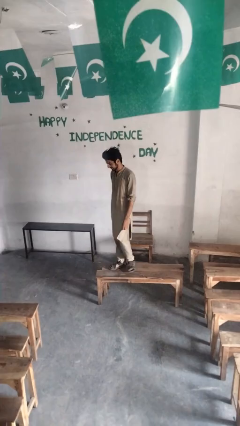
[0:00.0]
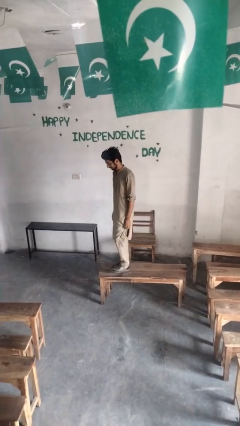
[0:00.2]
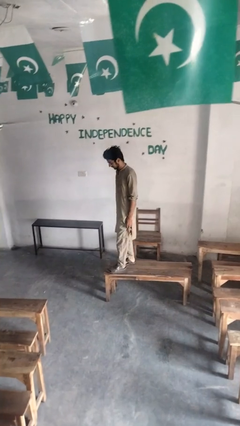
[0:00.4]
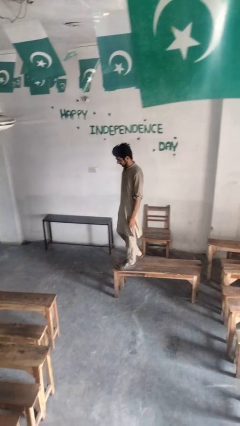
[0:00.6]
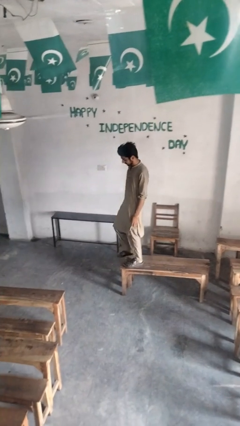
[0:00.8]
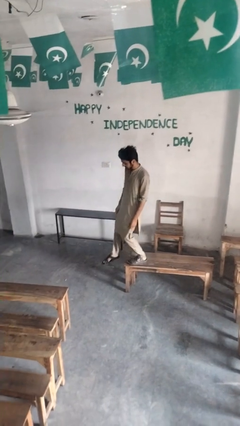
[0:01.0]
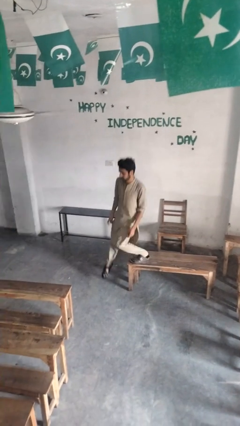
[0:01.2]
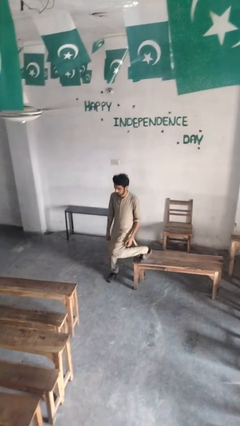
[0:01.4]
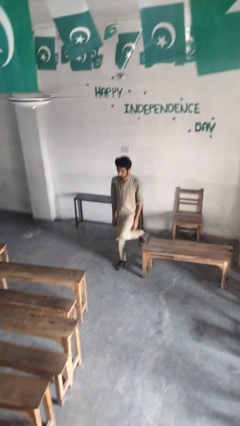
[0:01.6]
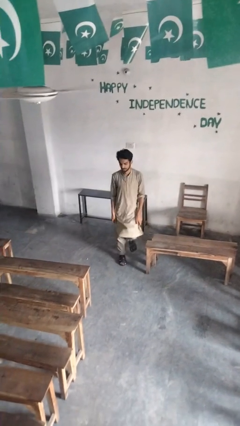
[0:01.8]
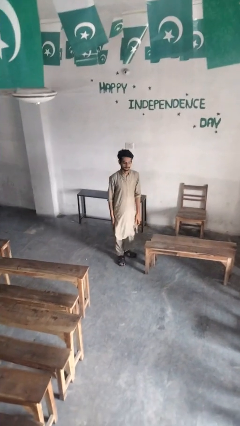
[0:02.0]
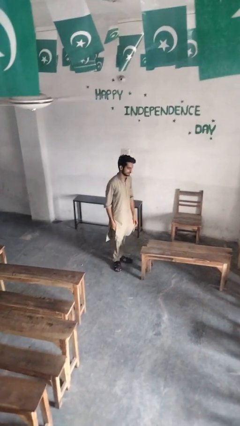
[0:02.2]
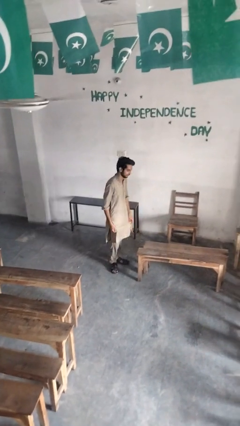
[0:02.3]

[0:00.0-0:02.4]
person climbs off table

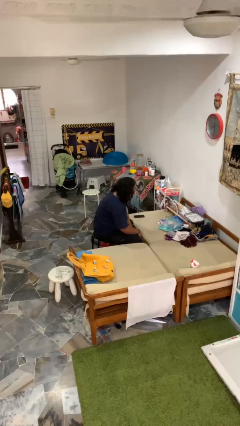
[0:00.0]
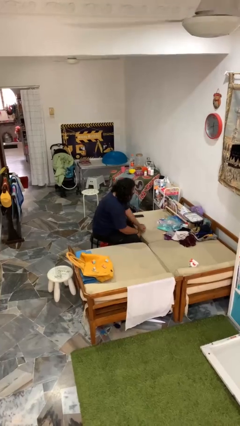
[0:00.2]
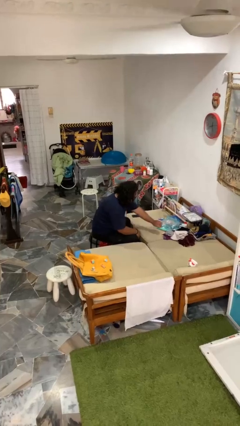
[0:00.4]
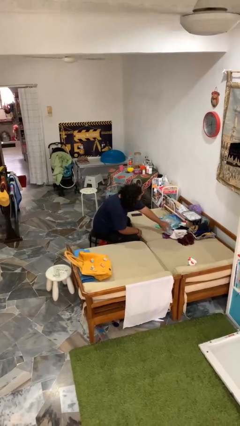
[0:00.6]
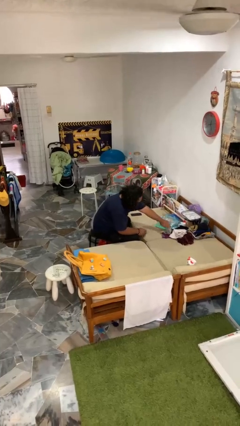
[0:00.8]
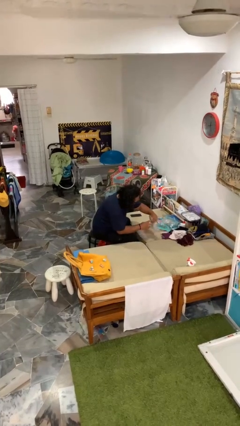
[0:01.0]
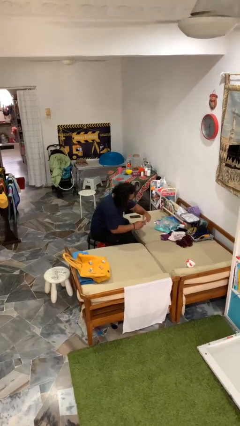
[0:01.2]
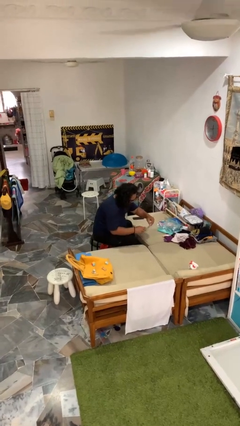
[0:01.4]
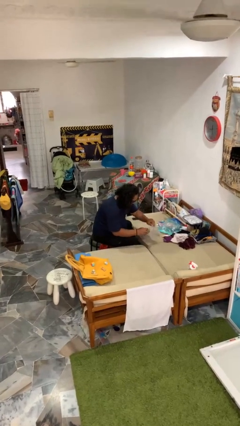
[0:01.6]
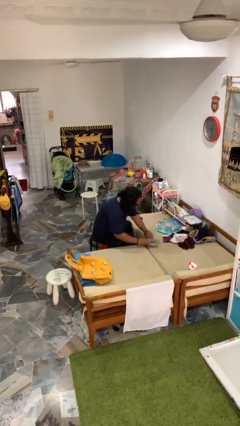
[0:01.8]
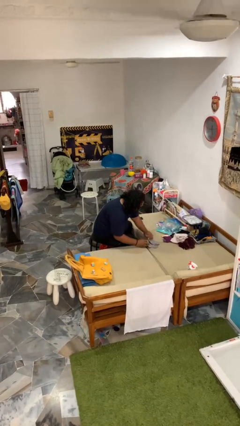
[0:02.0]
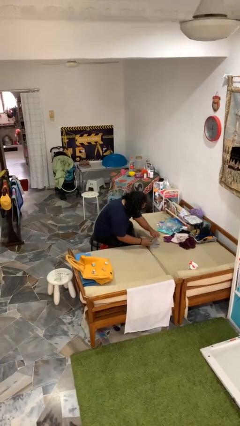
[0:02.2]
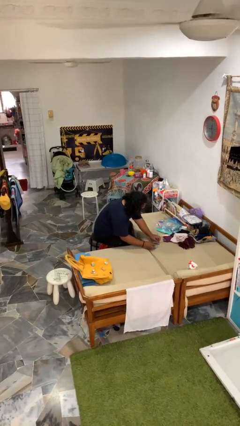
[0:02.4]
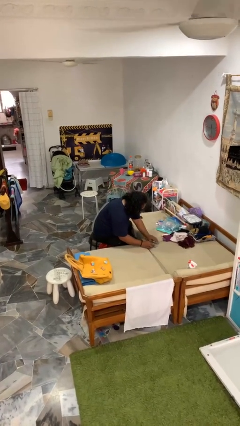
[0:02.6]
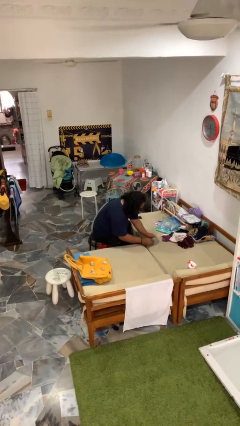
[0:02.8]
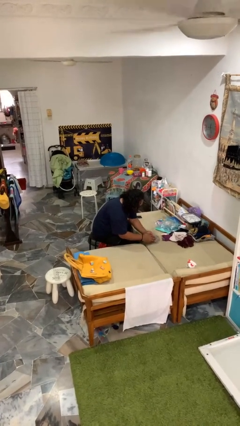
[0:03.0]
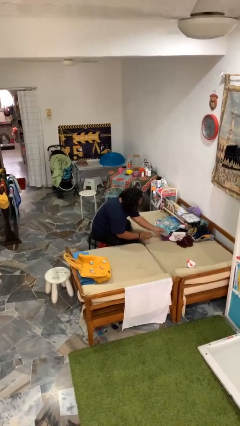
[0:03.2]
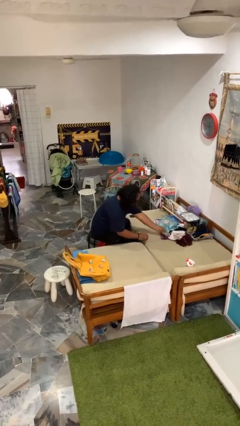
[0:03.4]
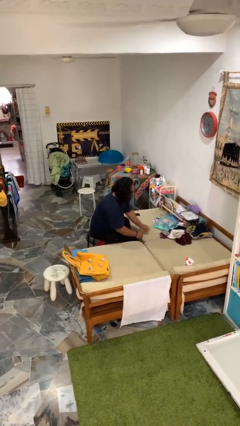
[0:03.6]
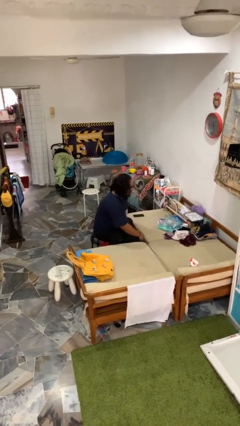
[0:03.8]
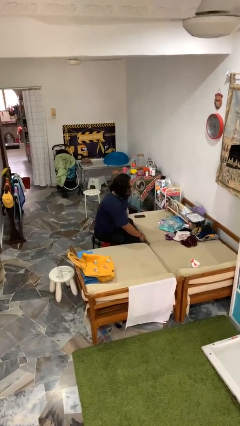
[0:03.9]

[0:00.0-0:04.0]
person folds socks

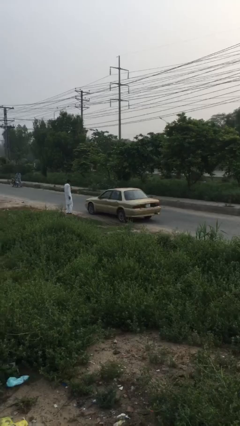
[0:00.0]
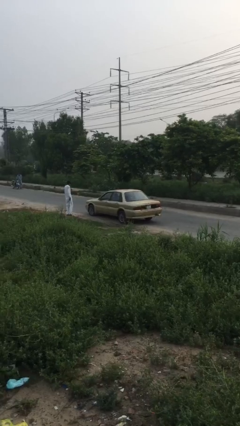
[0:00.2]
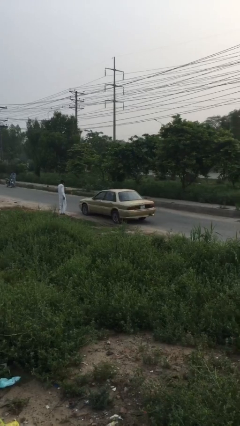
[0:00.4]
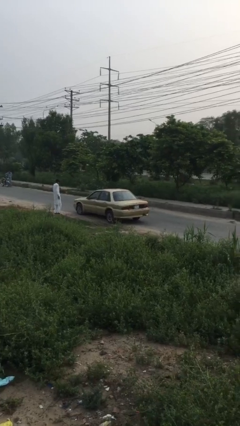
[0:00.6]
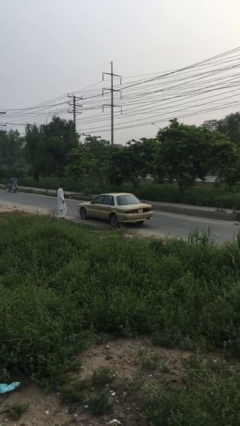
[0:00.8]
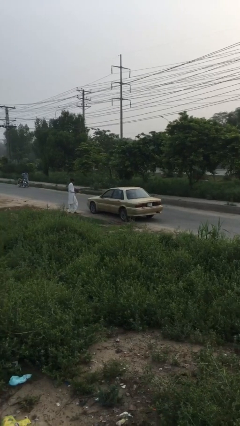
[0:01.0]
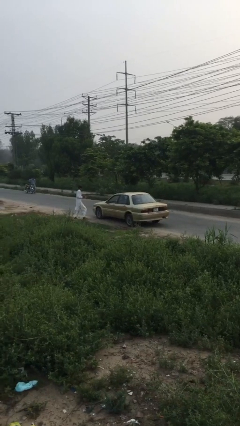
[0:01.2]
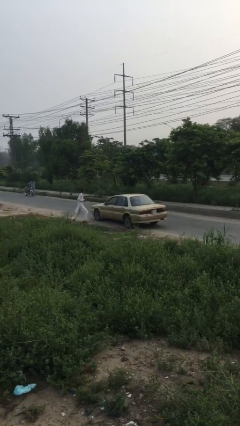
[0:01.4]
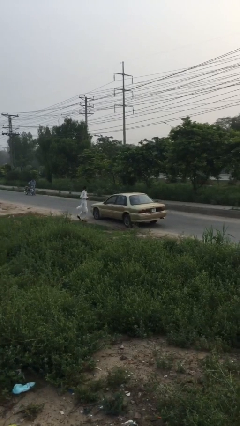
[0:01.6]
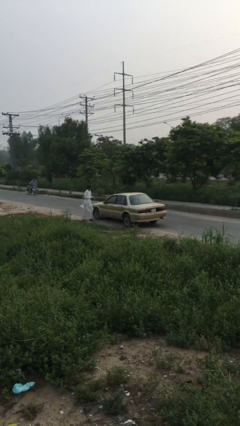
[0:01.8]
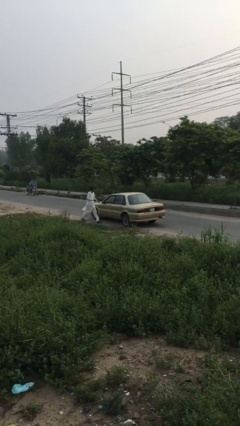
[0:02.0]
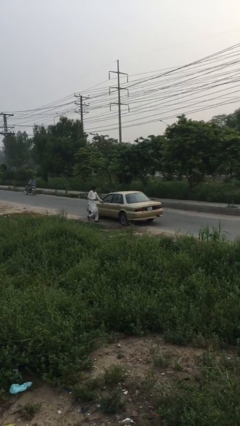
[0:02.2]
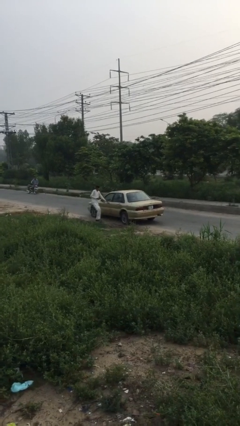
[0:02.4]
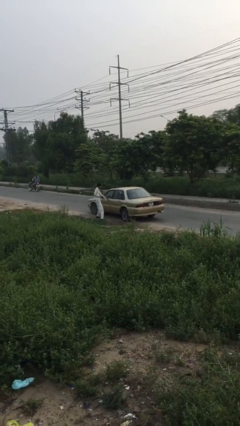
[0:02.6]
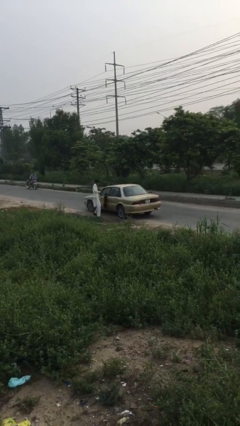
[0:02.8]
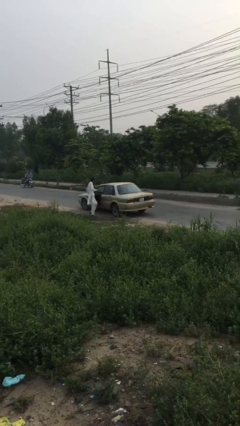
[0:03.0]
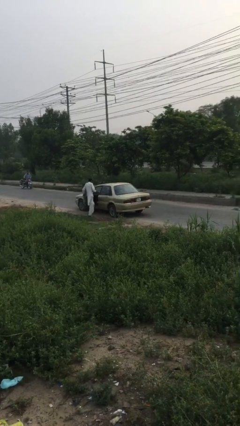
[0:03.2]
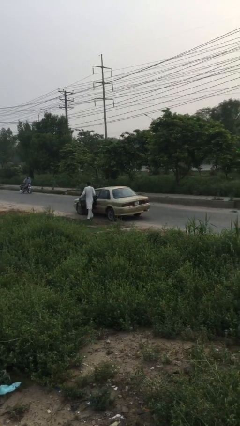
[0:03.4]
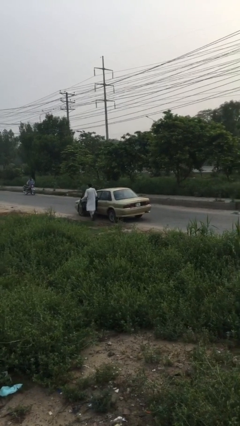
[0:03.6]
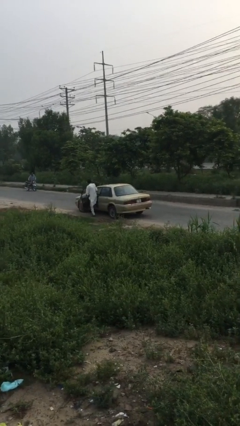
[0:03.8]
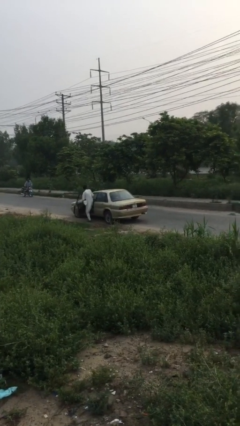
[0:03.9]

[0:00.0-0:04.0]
car picks up person

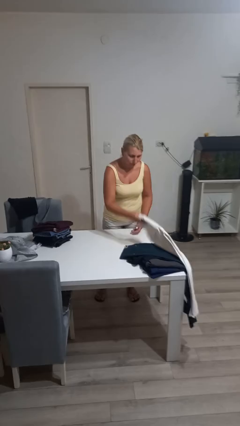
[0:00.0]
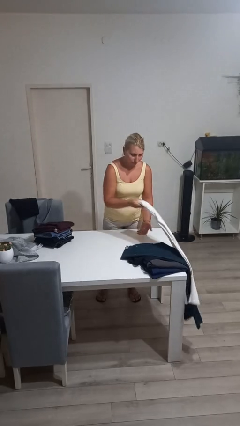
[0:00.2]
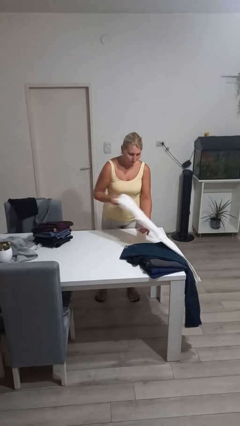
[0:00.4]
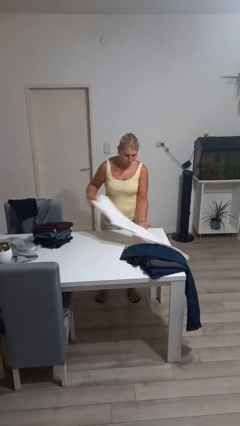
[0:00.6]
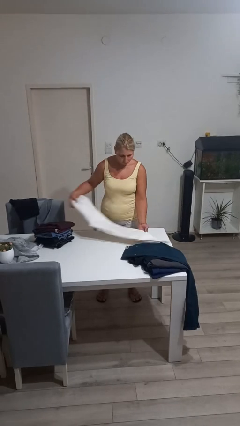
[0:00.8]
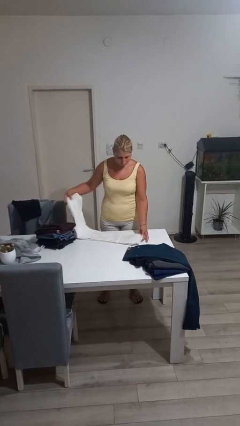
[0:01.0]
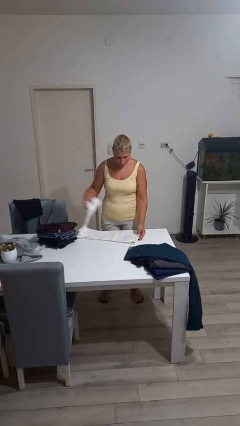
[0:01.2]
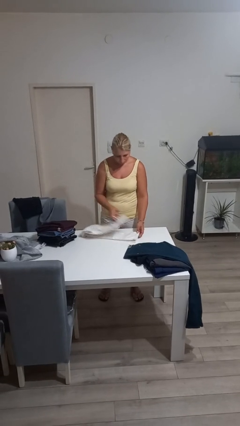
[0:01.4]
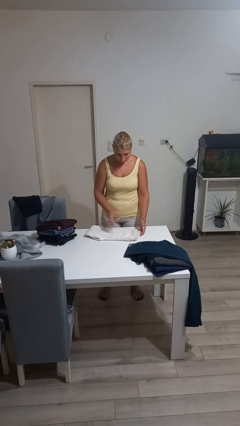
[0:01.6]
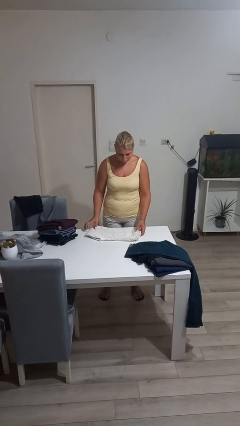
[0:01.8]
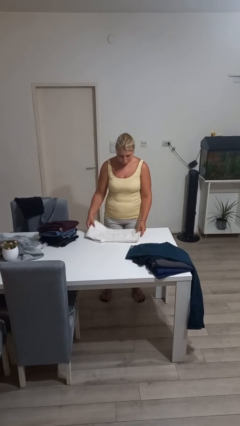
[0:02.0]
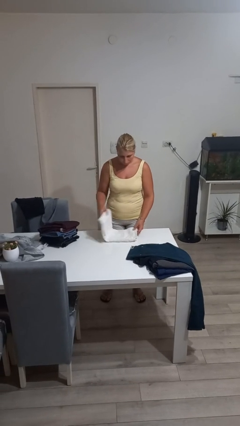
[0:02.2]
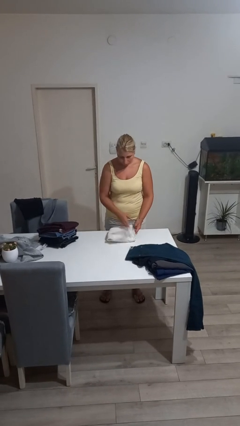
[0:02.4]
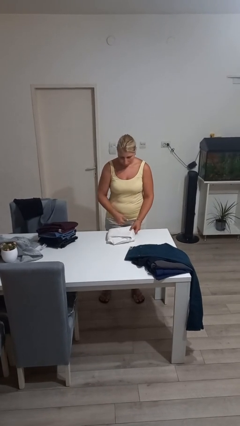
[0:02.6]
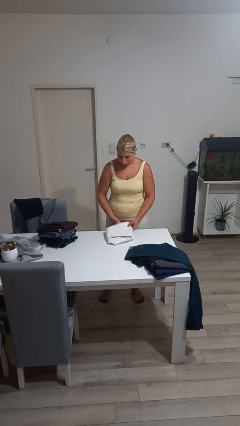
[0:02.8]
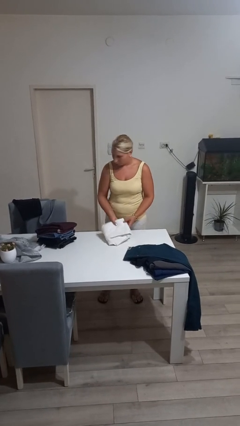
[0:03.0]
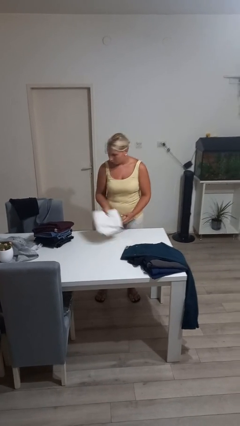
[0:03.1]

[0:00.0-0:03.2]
person folds pants

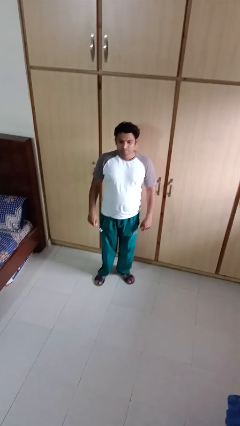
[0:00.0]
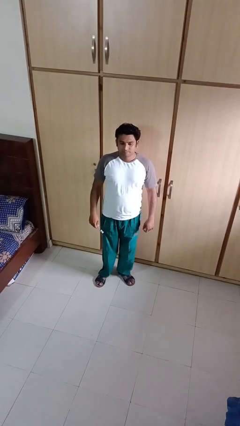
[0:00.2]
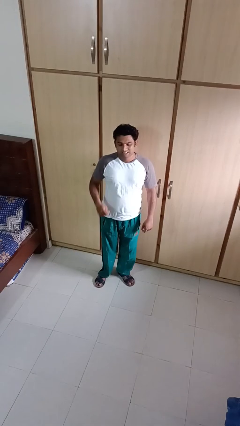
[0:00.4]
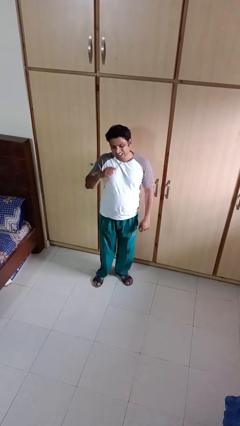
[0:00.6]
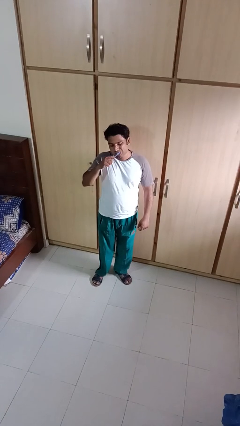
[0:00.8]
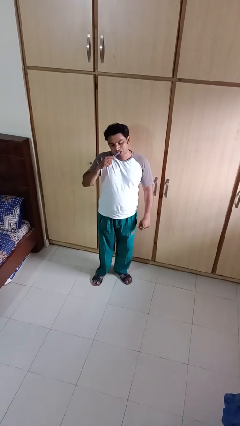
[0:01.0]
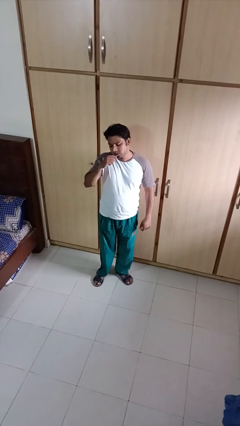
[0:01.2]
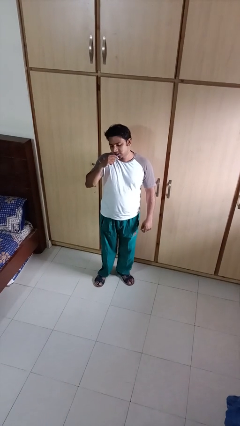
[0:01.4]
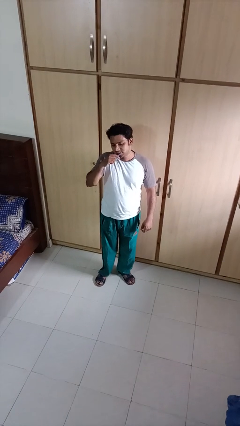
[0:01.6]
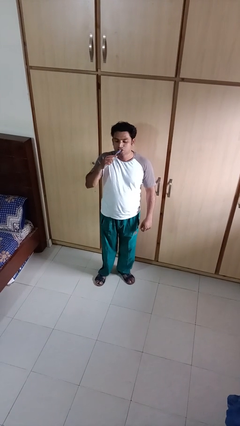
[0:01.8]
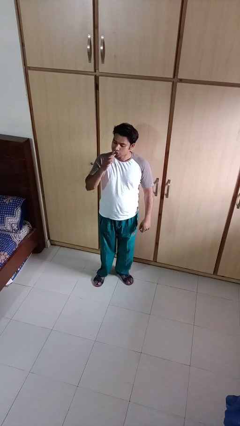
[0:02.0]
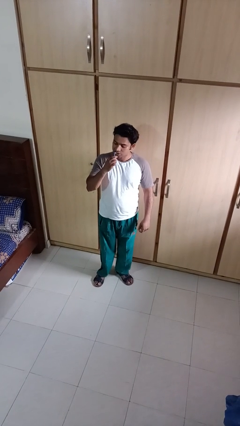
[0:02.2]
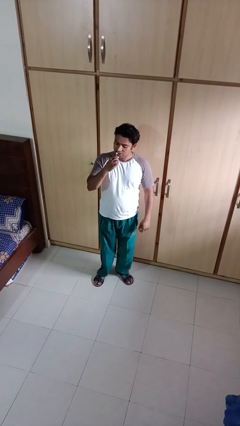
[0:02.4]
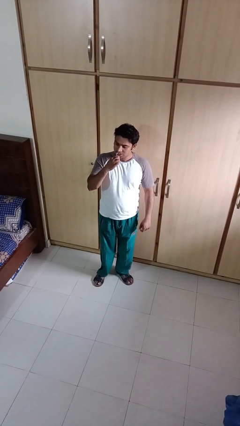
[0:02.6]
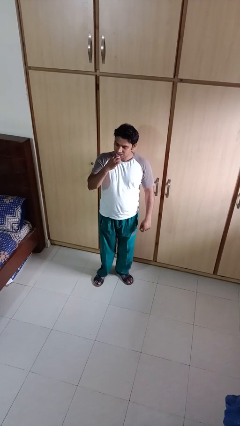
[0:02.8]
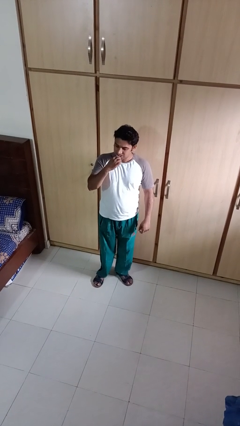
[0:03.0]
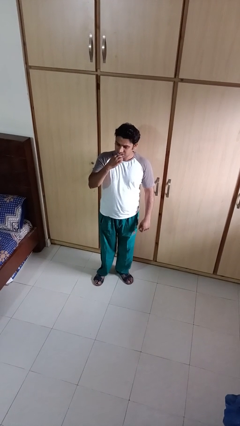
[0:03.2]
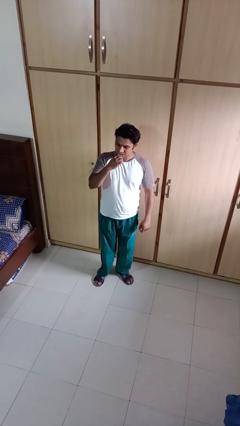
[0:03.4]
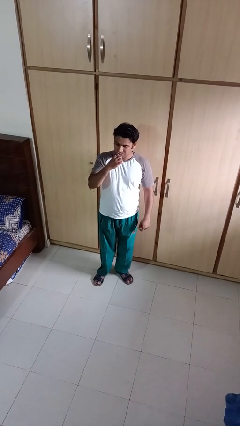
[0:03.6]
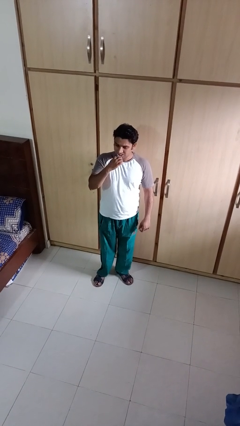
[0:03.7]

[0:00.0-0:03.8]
person brushes teeth

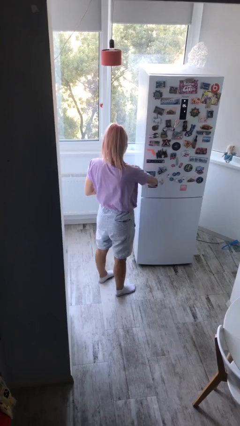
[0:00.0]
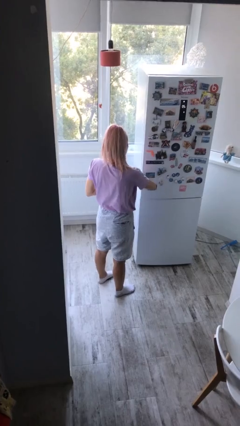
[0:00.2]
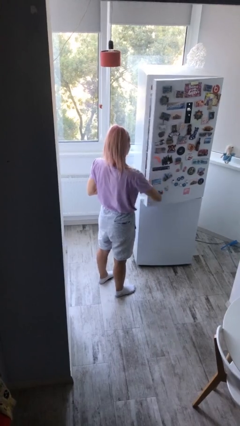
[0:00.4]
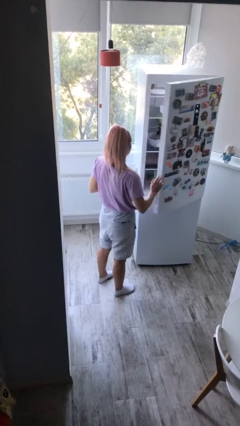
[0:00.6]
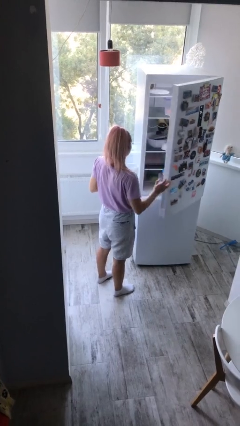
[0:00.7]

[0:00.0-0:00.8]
person opens refrigerator
